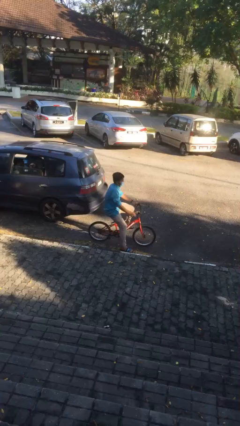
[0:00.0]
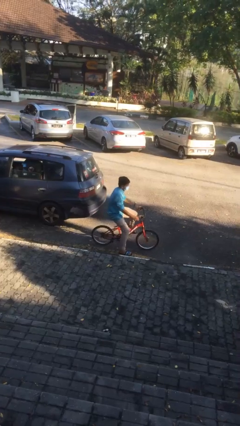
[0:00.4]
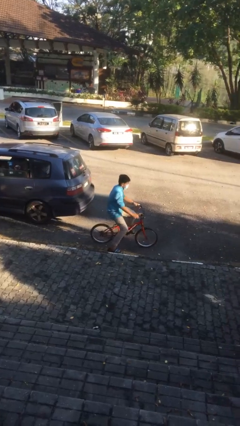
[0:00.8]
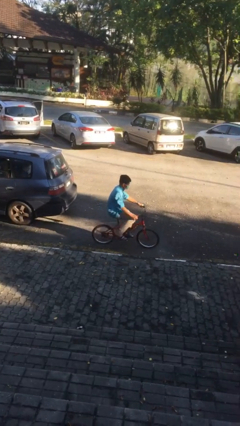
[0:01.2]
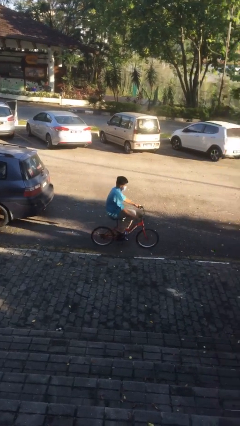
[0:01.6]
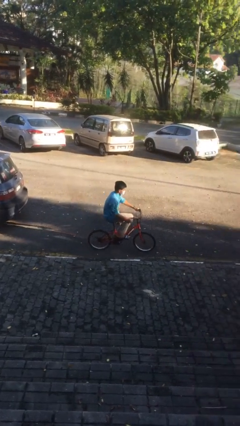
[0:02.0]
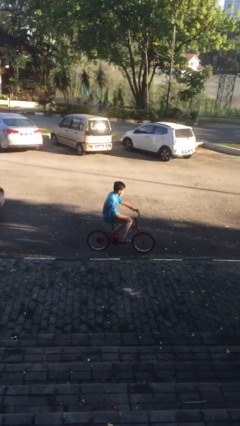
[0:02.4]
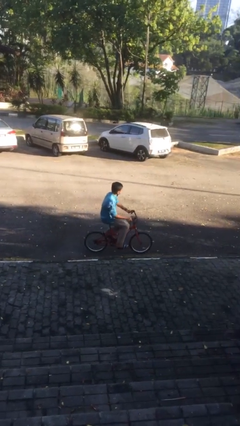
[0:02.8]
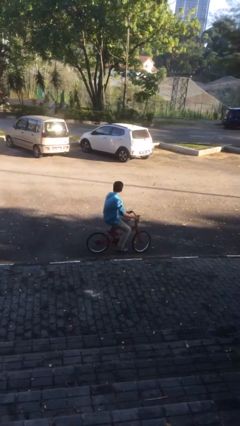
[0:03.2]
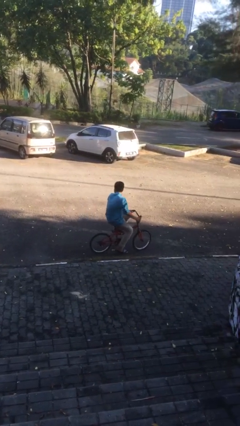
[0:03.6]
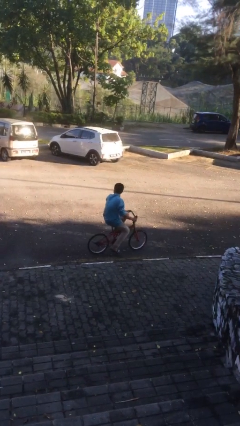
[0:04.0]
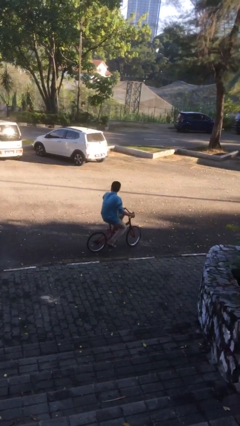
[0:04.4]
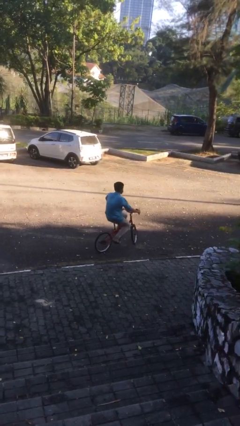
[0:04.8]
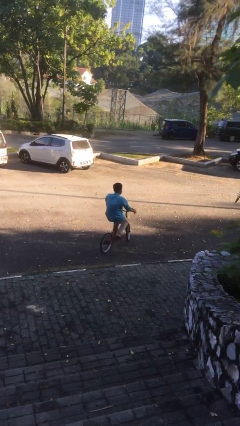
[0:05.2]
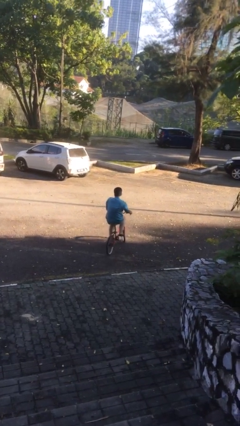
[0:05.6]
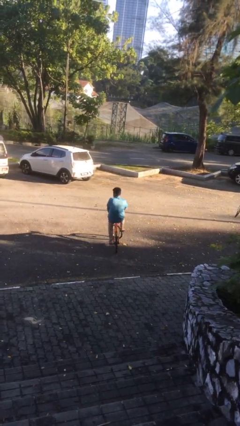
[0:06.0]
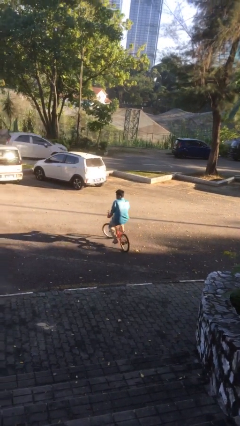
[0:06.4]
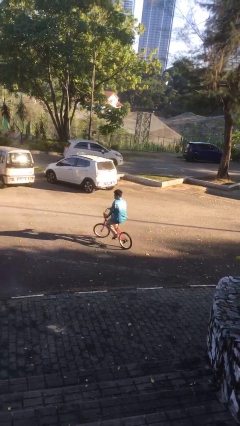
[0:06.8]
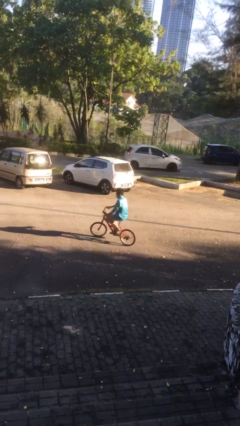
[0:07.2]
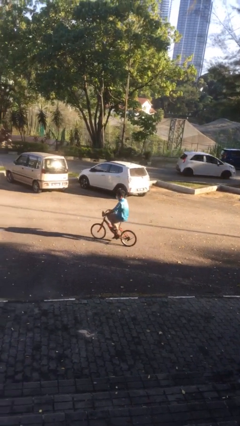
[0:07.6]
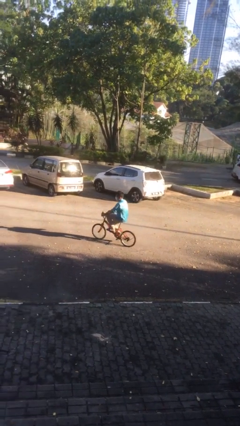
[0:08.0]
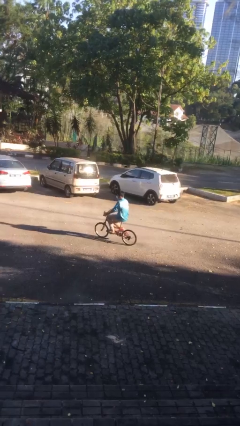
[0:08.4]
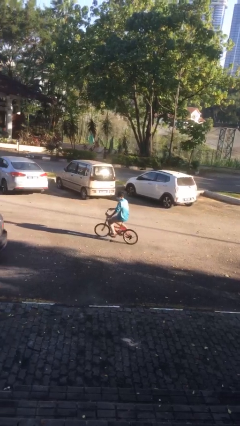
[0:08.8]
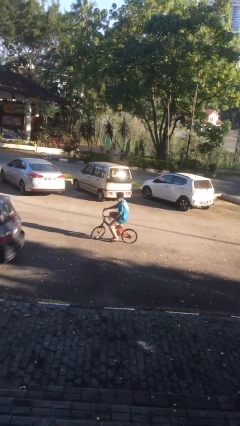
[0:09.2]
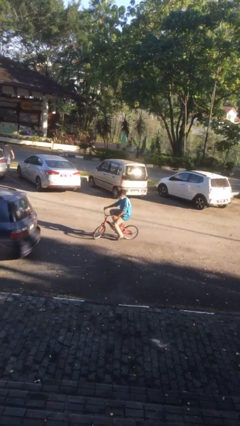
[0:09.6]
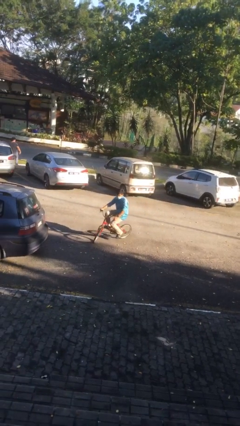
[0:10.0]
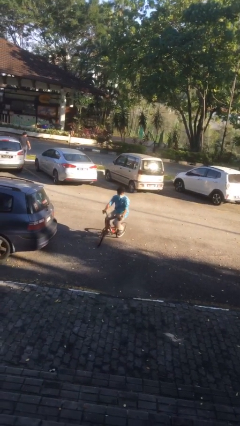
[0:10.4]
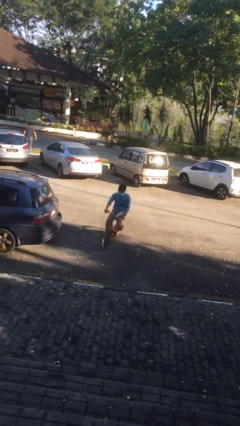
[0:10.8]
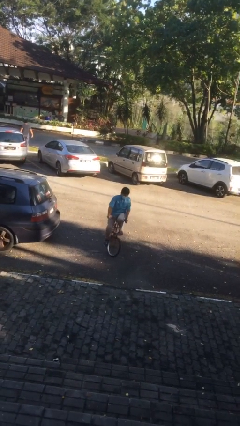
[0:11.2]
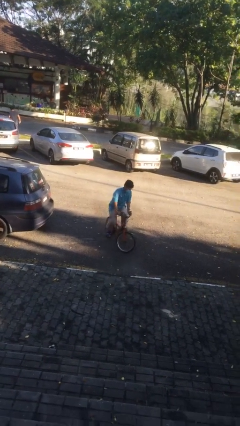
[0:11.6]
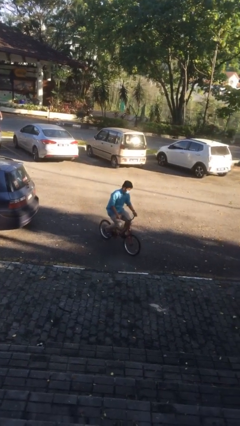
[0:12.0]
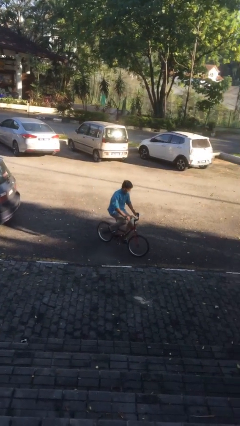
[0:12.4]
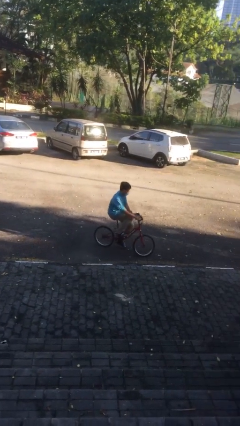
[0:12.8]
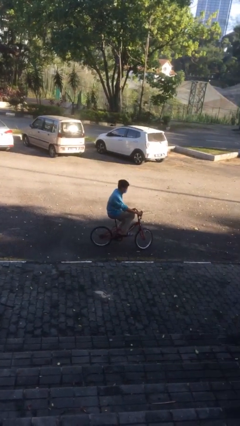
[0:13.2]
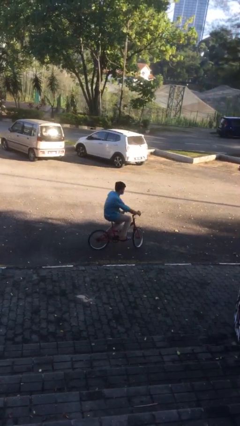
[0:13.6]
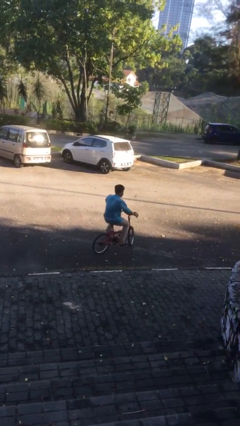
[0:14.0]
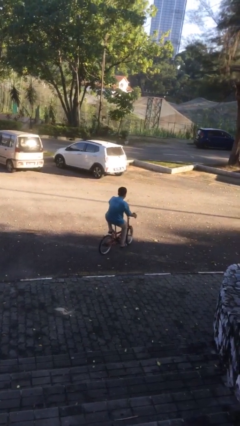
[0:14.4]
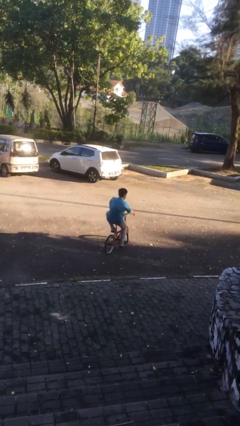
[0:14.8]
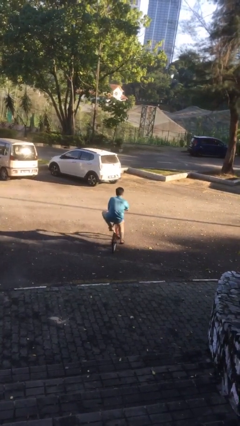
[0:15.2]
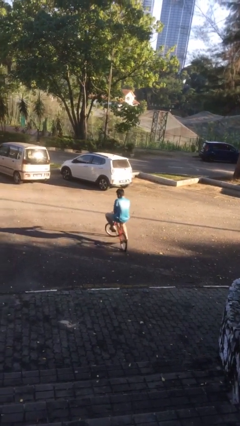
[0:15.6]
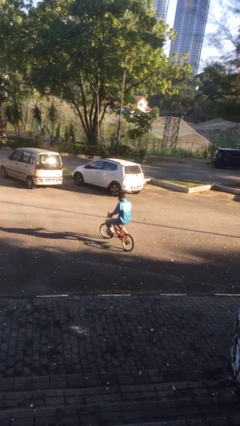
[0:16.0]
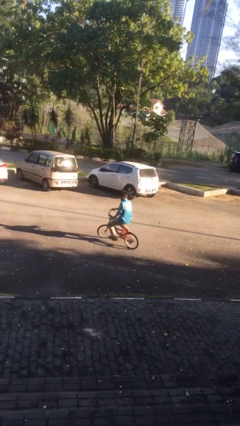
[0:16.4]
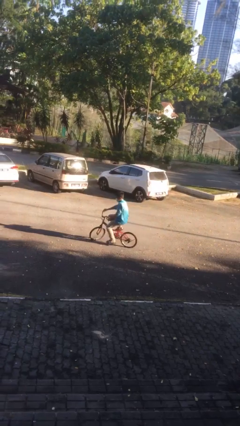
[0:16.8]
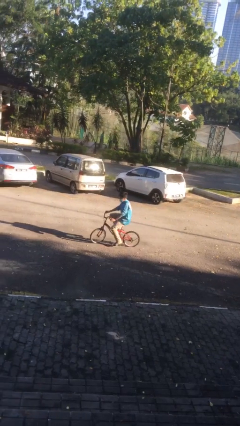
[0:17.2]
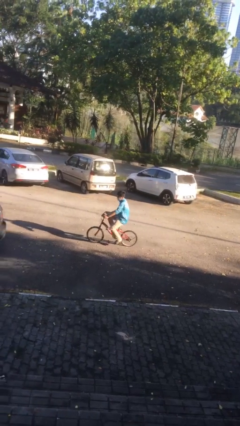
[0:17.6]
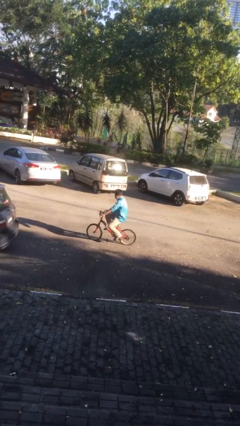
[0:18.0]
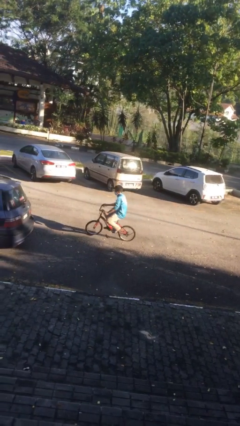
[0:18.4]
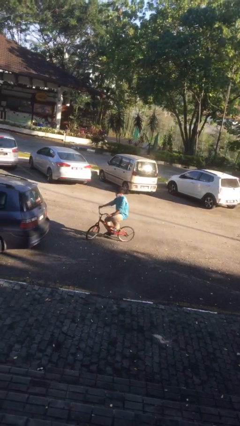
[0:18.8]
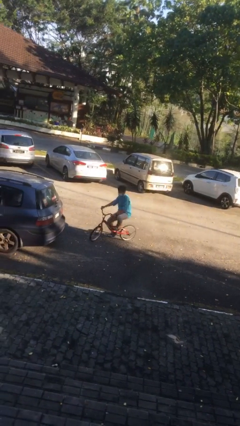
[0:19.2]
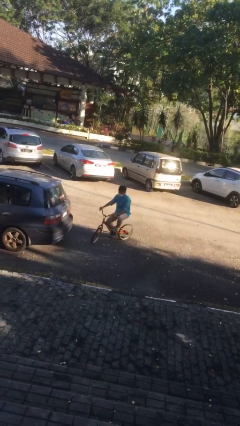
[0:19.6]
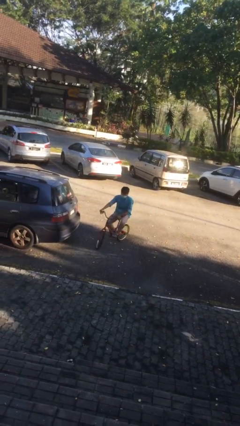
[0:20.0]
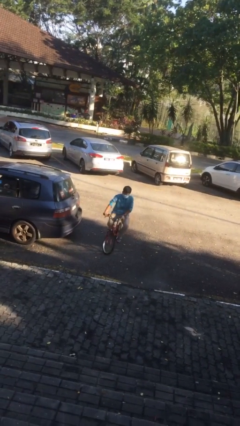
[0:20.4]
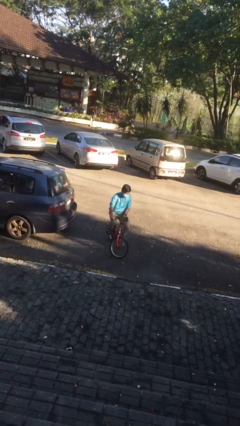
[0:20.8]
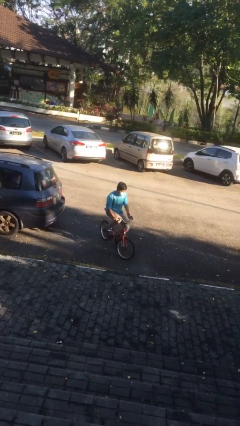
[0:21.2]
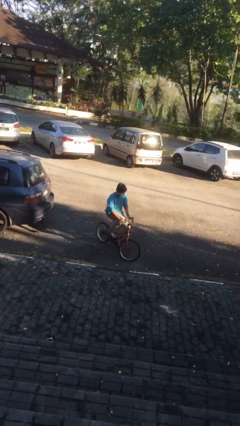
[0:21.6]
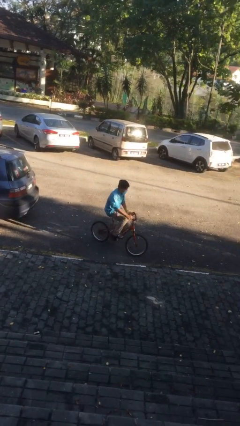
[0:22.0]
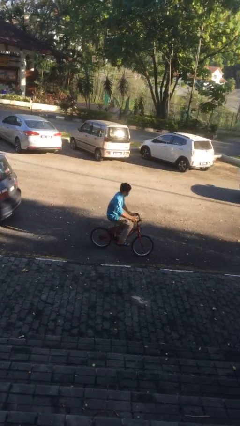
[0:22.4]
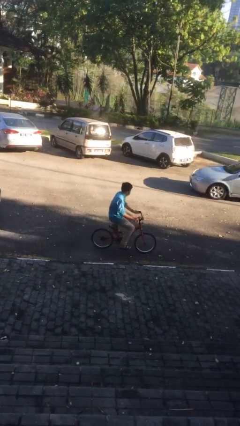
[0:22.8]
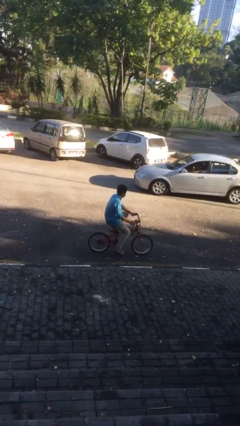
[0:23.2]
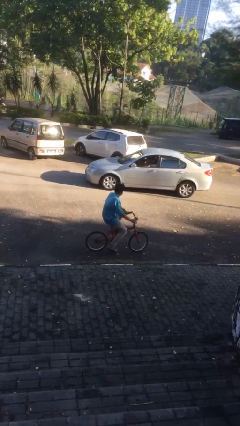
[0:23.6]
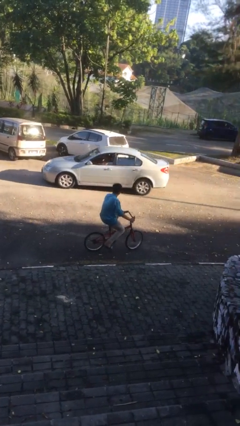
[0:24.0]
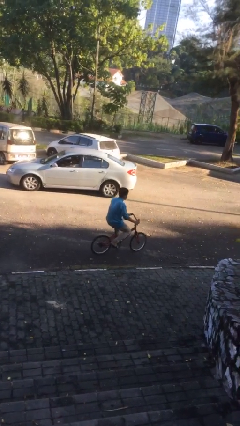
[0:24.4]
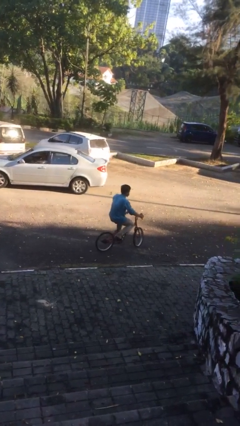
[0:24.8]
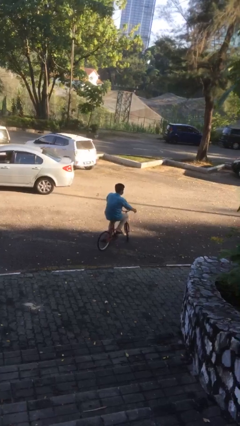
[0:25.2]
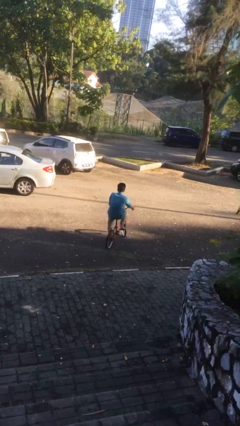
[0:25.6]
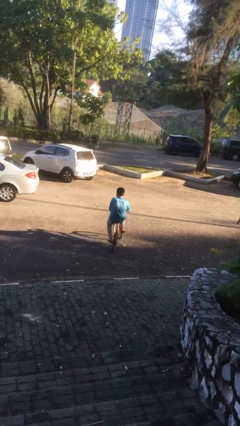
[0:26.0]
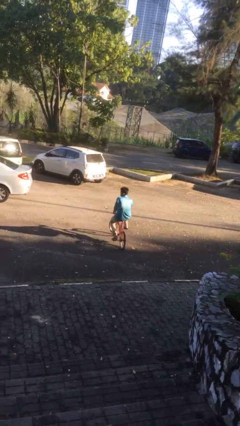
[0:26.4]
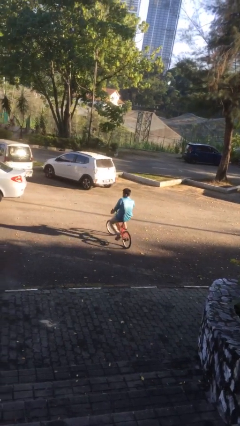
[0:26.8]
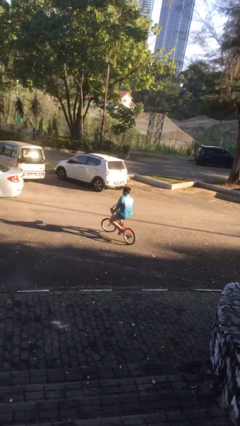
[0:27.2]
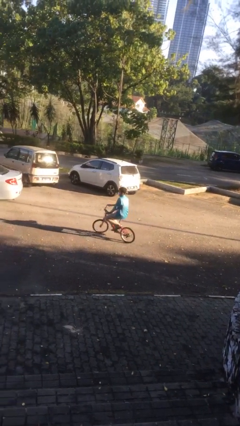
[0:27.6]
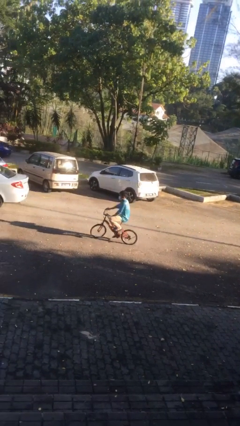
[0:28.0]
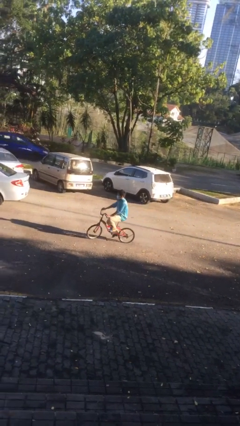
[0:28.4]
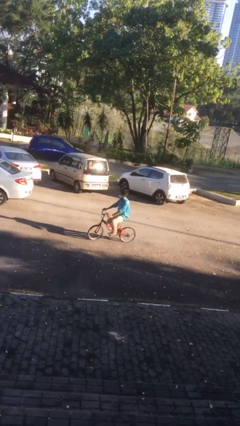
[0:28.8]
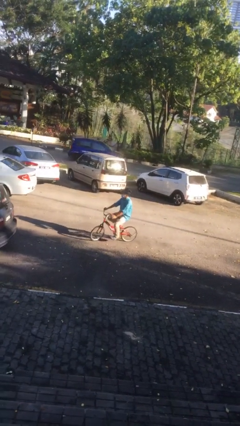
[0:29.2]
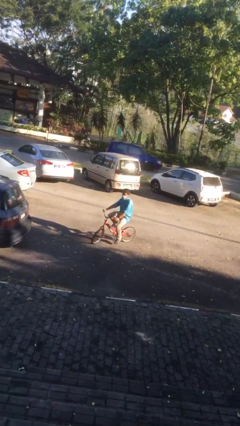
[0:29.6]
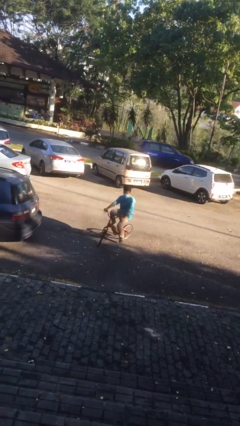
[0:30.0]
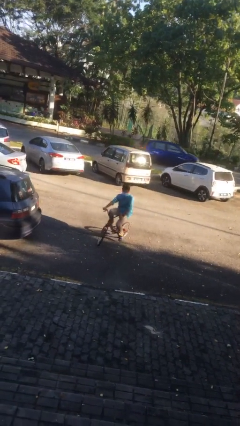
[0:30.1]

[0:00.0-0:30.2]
person rides bicycle

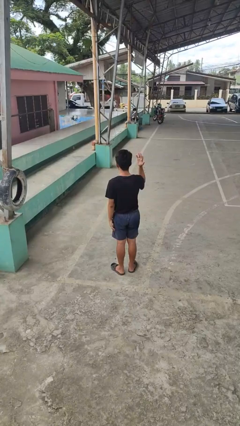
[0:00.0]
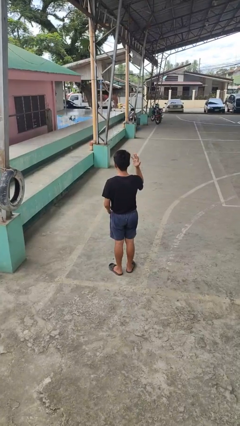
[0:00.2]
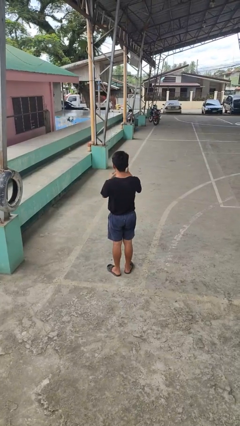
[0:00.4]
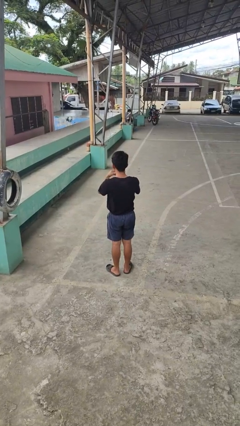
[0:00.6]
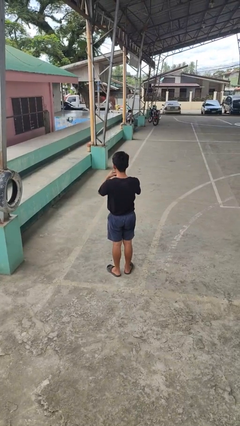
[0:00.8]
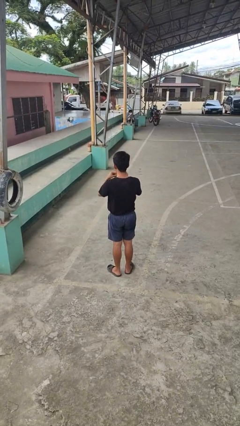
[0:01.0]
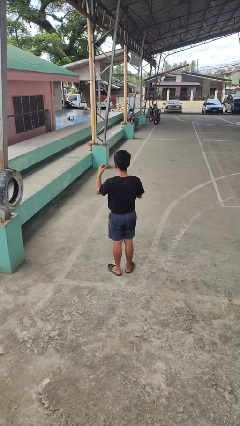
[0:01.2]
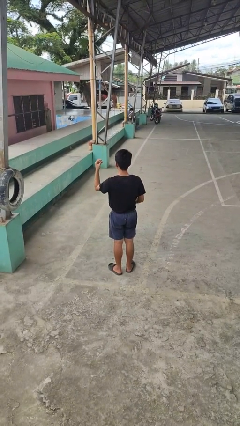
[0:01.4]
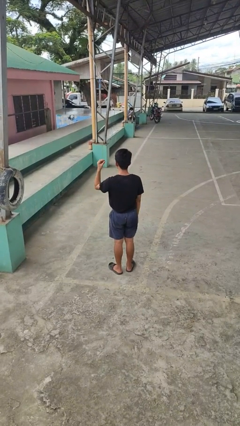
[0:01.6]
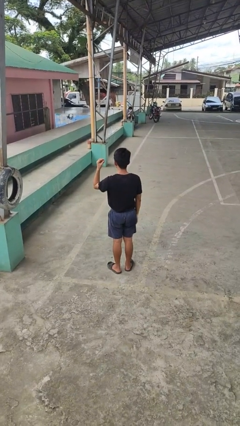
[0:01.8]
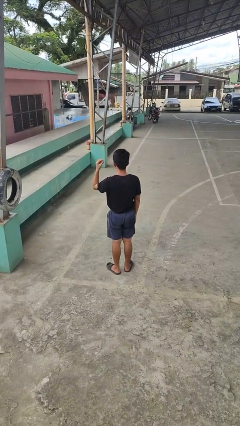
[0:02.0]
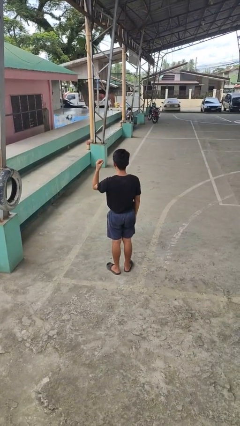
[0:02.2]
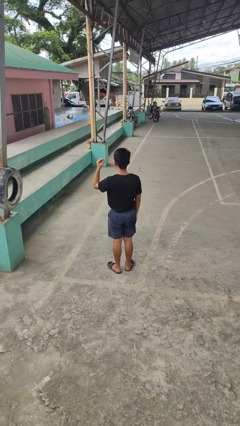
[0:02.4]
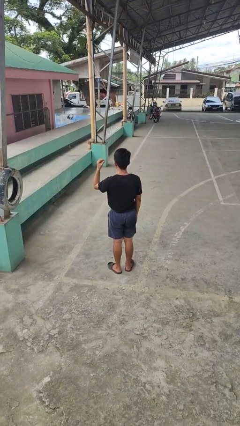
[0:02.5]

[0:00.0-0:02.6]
person takes off ring

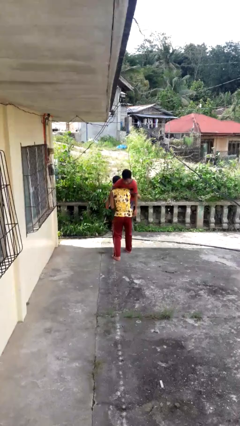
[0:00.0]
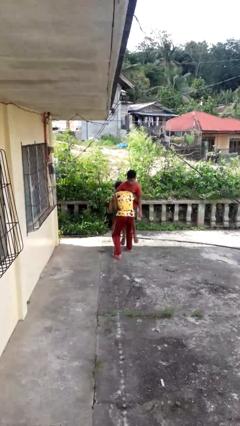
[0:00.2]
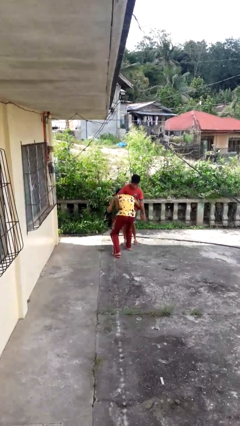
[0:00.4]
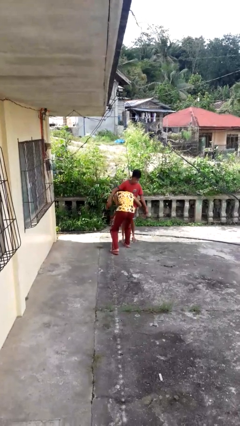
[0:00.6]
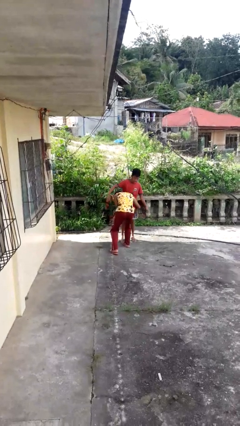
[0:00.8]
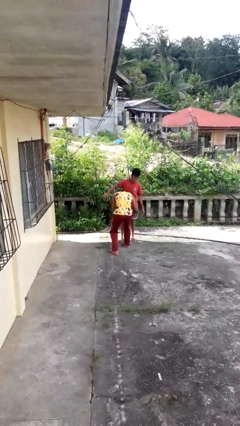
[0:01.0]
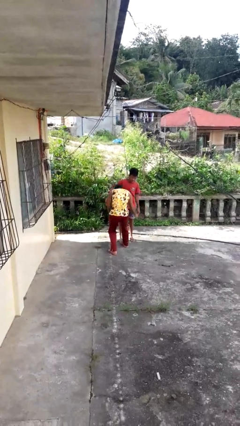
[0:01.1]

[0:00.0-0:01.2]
person puts down person
